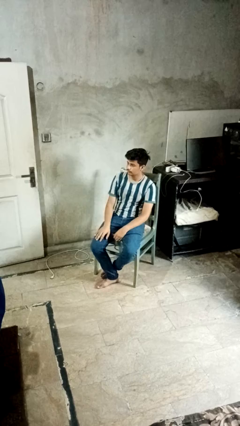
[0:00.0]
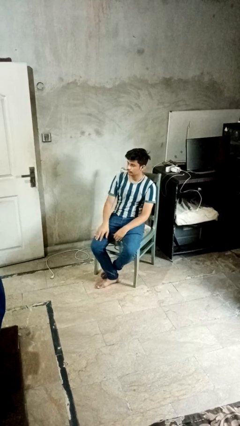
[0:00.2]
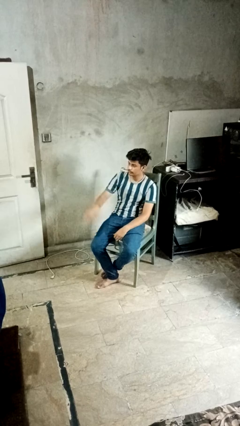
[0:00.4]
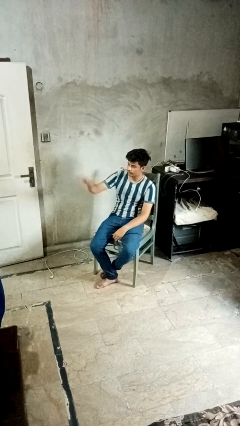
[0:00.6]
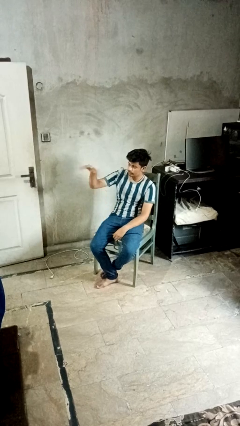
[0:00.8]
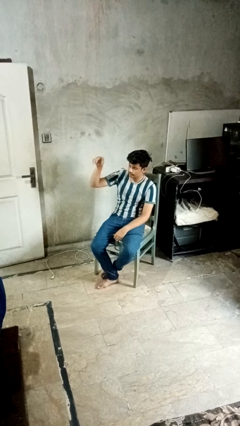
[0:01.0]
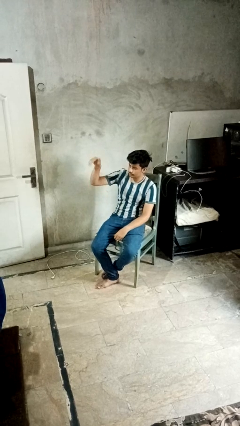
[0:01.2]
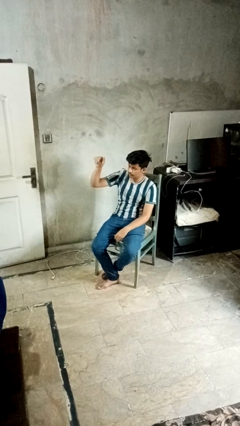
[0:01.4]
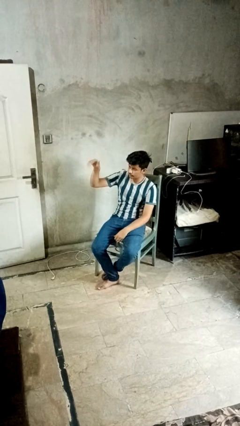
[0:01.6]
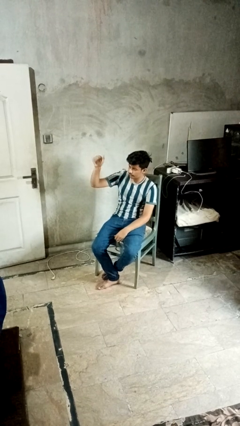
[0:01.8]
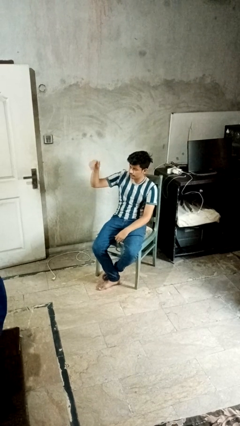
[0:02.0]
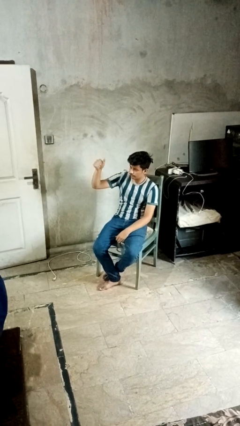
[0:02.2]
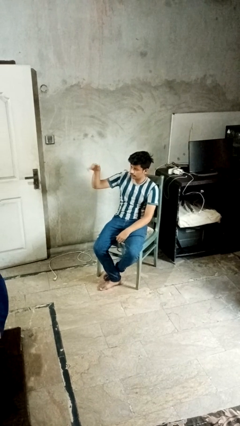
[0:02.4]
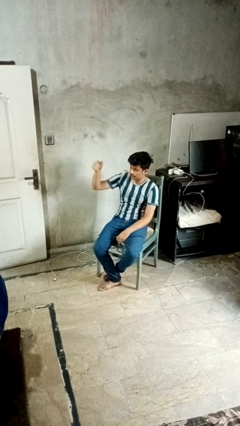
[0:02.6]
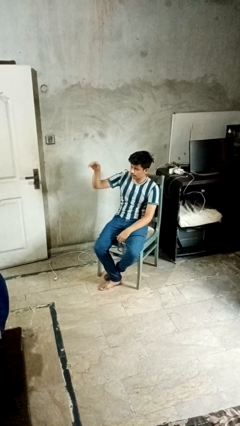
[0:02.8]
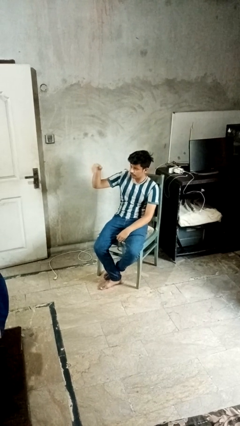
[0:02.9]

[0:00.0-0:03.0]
person gestures come here

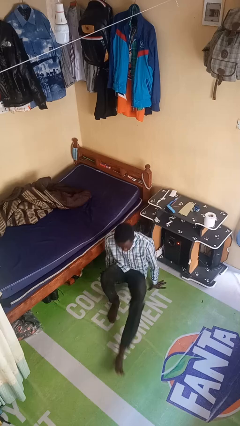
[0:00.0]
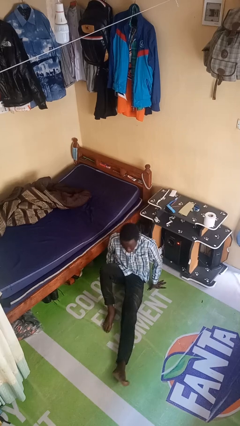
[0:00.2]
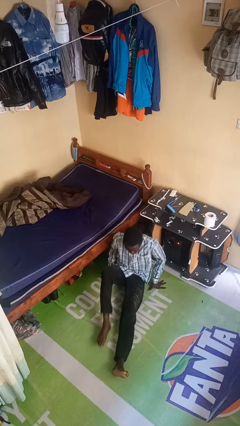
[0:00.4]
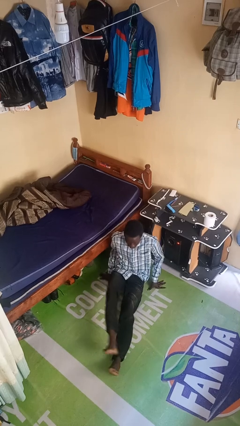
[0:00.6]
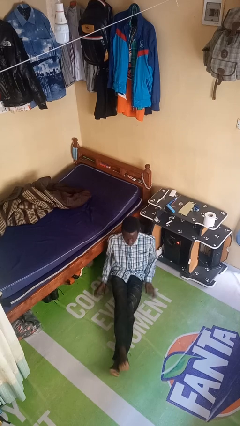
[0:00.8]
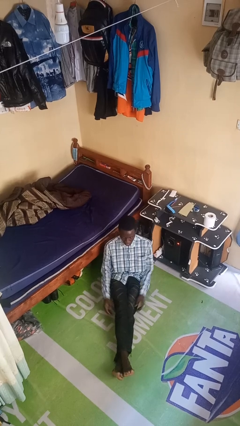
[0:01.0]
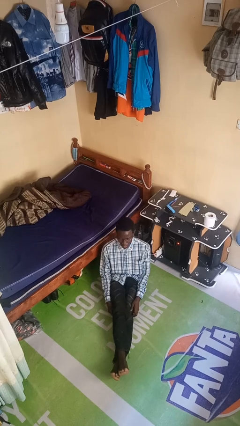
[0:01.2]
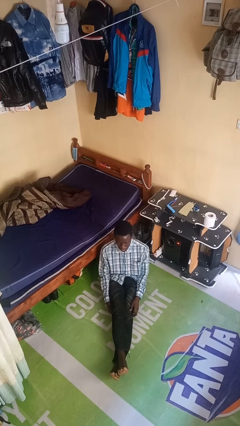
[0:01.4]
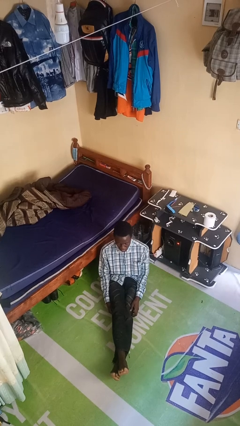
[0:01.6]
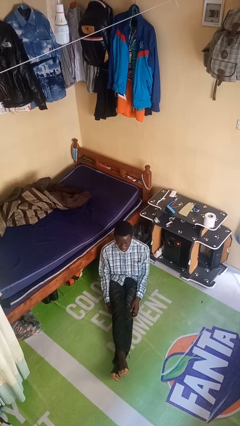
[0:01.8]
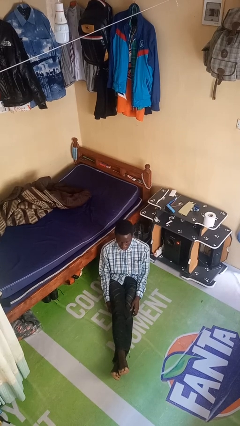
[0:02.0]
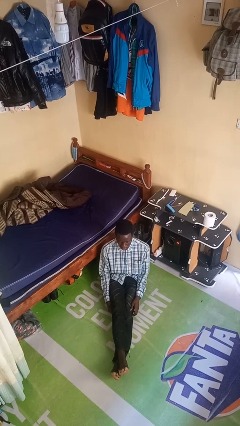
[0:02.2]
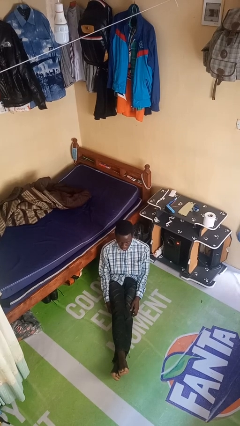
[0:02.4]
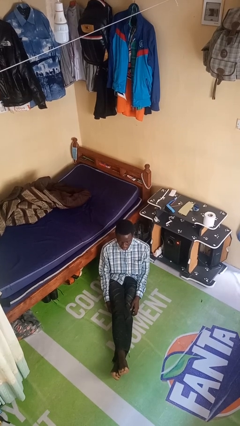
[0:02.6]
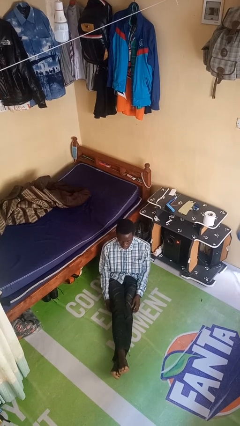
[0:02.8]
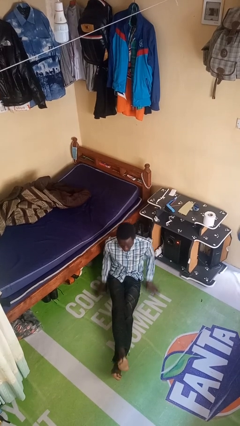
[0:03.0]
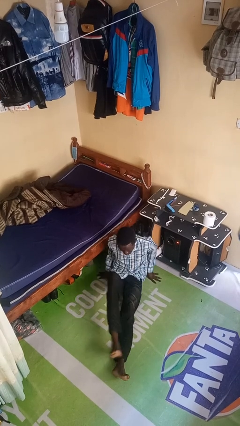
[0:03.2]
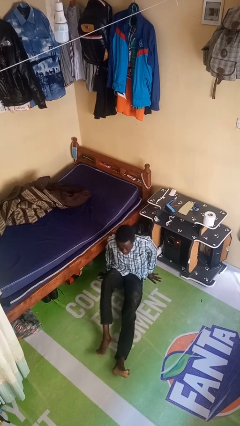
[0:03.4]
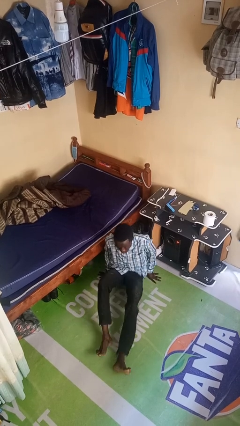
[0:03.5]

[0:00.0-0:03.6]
person sits crisscross

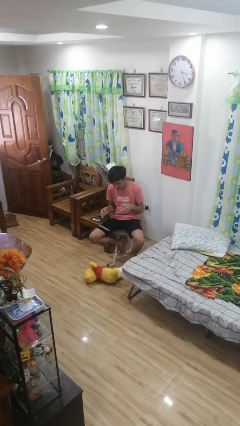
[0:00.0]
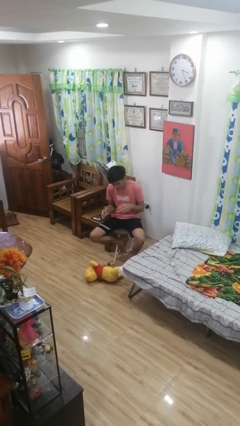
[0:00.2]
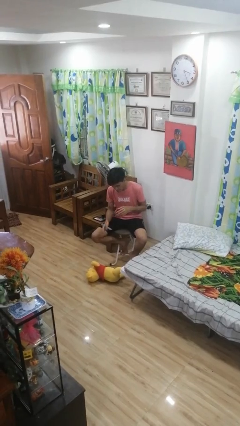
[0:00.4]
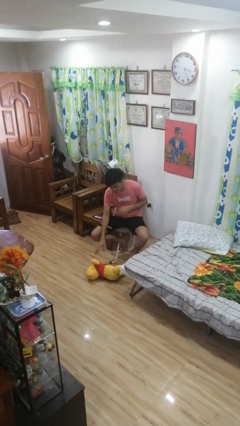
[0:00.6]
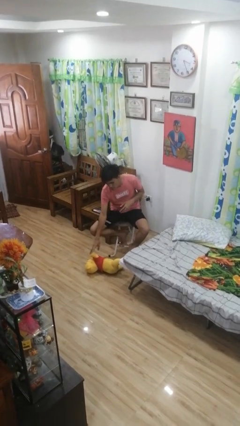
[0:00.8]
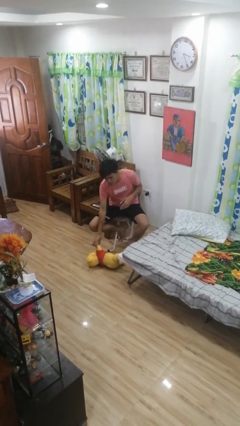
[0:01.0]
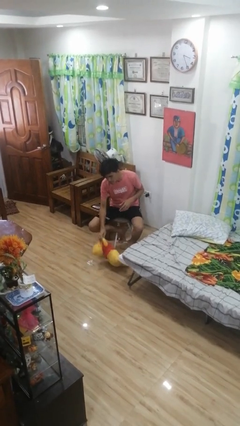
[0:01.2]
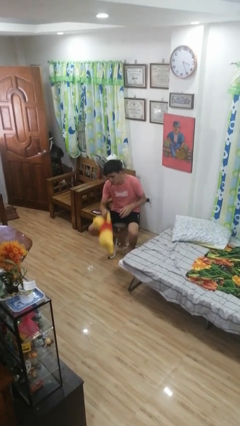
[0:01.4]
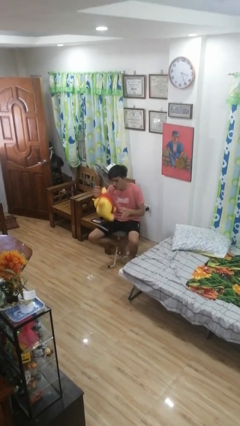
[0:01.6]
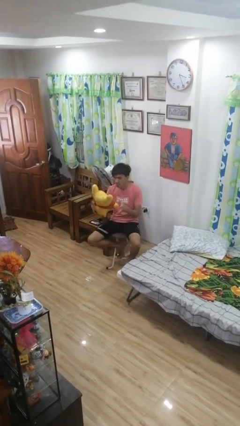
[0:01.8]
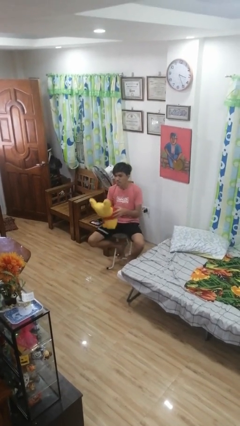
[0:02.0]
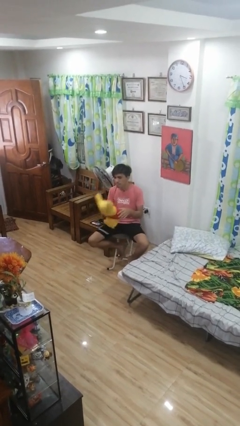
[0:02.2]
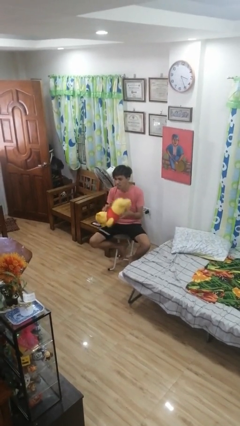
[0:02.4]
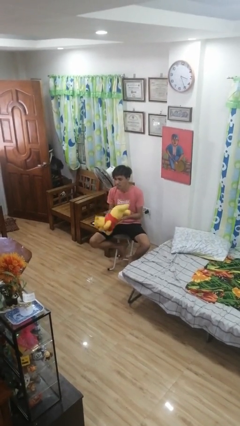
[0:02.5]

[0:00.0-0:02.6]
person picks up object from floor

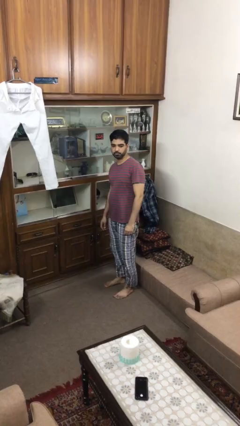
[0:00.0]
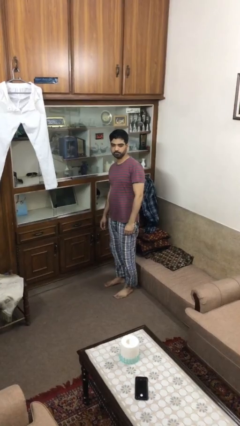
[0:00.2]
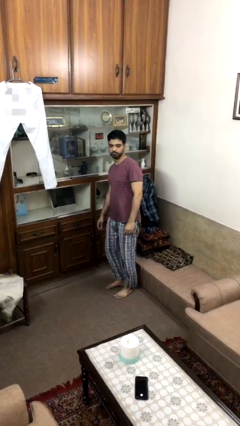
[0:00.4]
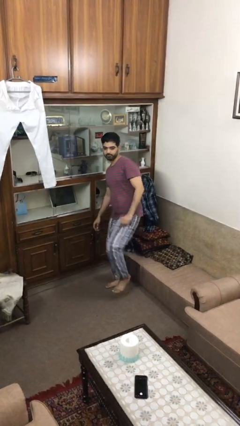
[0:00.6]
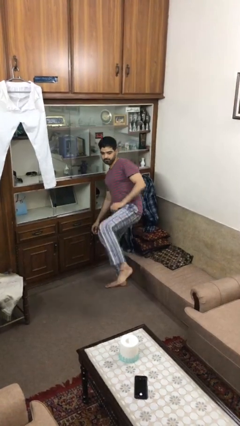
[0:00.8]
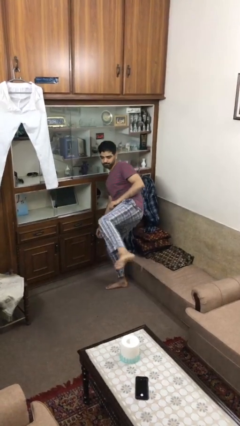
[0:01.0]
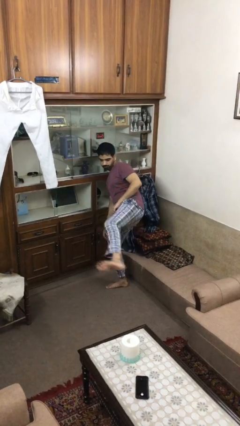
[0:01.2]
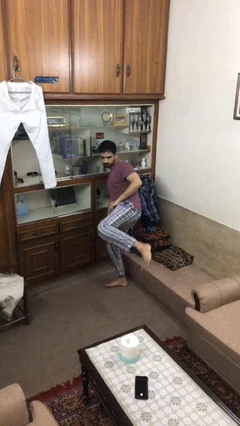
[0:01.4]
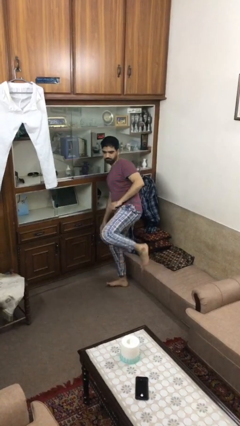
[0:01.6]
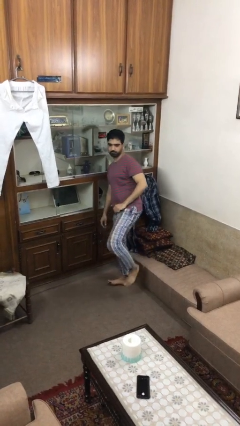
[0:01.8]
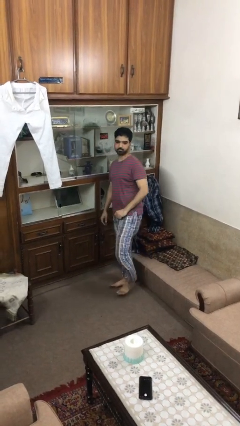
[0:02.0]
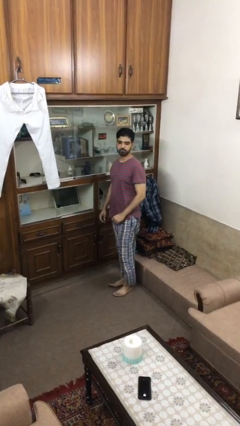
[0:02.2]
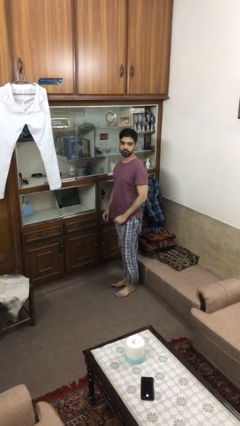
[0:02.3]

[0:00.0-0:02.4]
person karate kicks

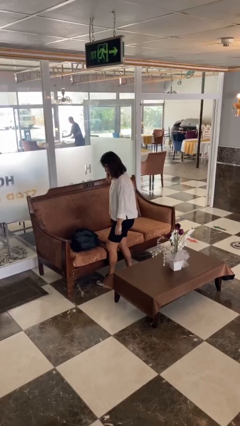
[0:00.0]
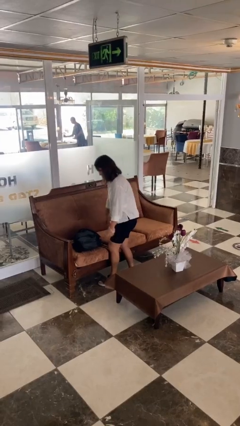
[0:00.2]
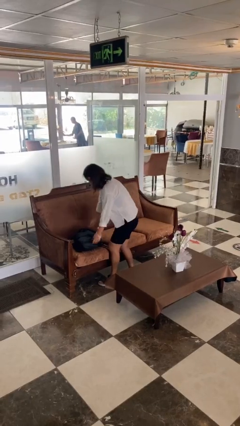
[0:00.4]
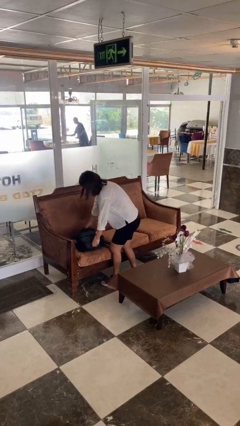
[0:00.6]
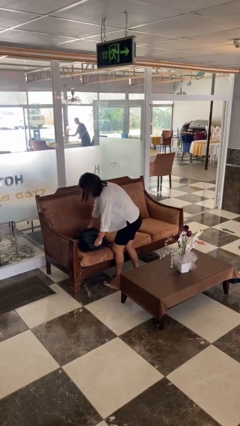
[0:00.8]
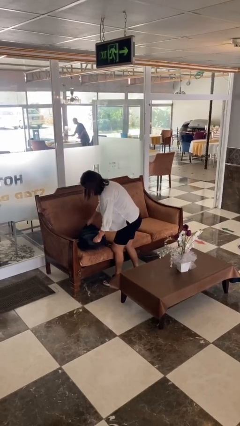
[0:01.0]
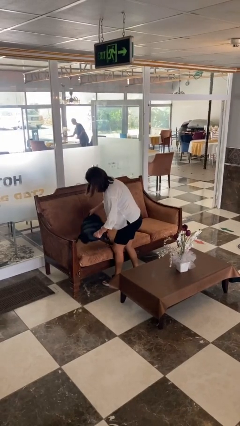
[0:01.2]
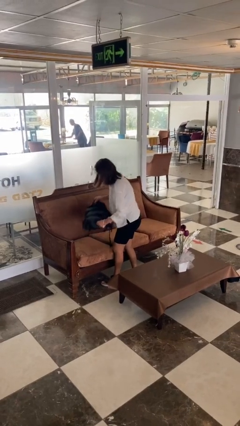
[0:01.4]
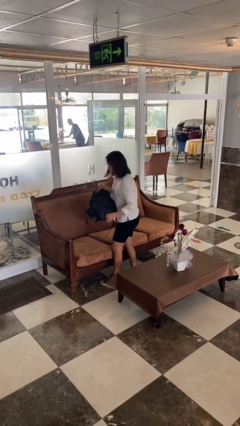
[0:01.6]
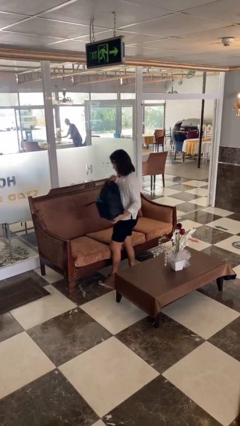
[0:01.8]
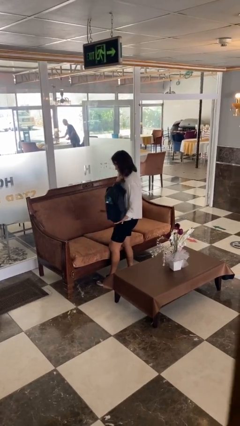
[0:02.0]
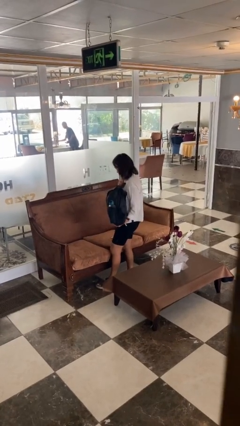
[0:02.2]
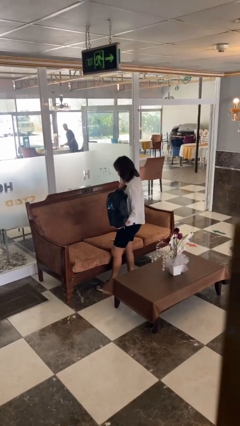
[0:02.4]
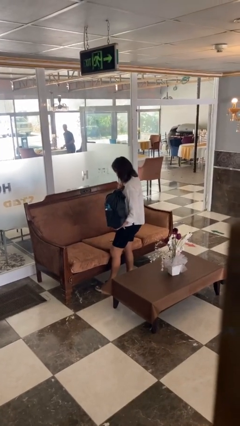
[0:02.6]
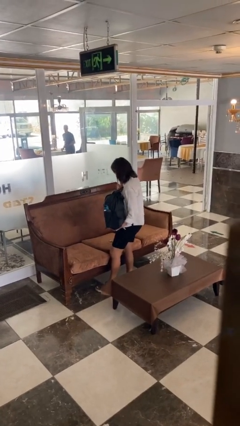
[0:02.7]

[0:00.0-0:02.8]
person picks up object from couch

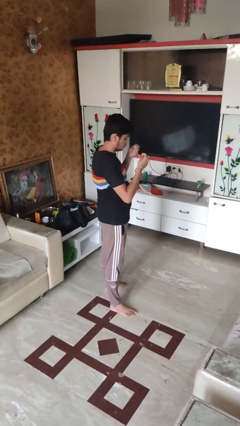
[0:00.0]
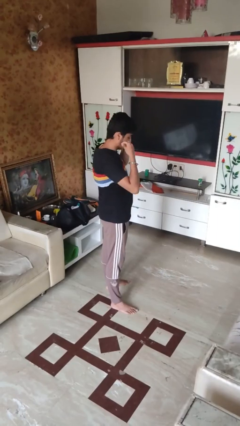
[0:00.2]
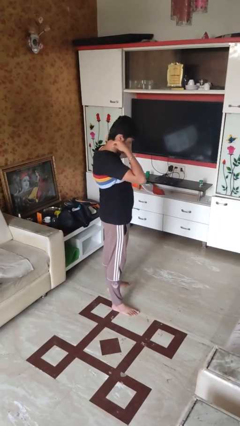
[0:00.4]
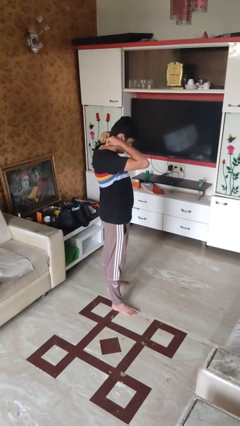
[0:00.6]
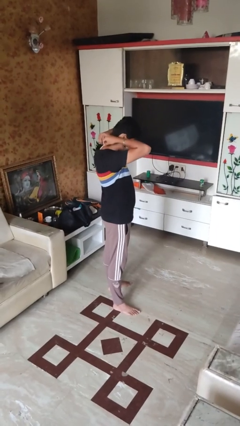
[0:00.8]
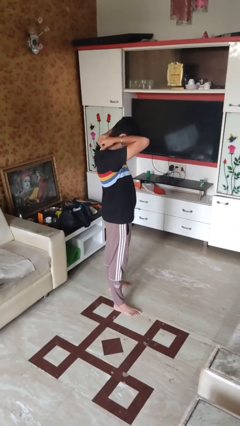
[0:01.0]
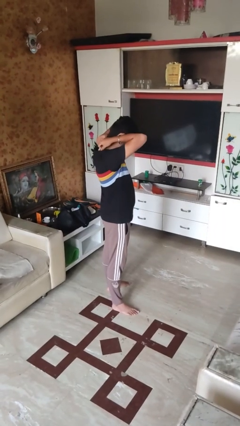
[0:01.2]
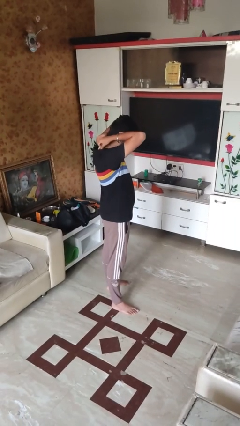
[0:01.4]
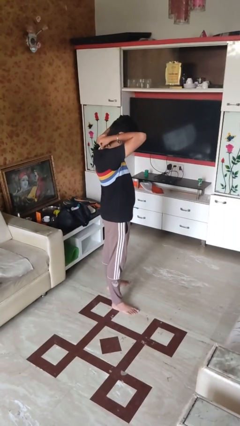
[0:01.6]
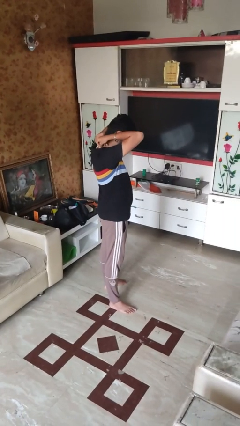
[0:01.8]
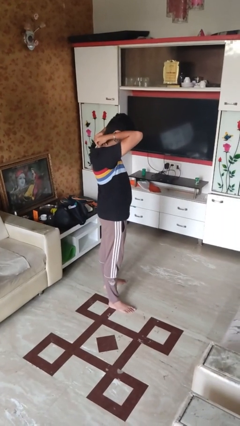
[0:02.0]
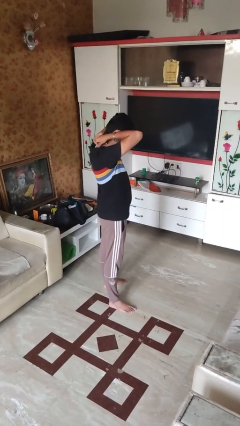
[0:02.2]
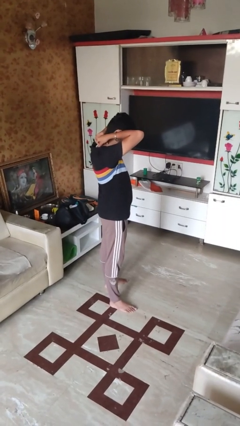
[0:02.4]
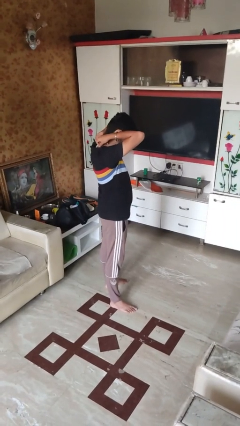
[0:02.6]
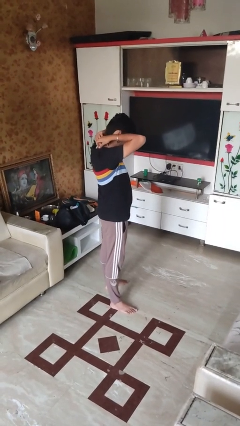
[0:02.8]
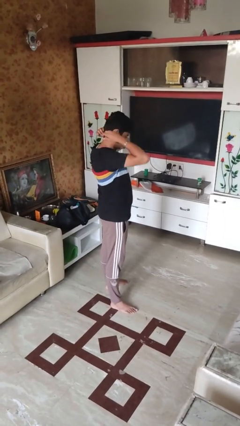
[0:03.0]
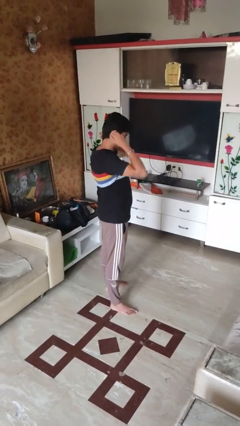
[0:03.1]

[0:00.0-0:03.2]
person puts on necklace
